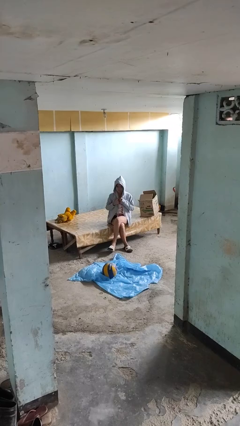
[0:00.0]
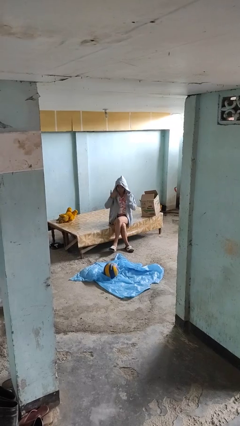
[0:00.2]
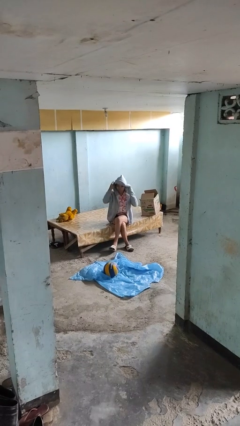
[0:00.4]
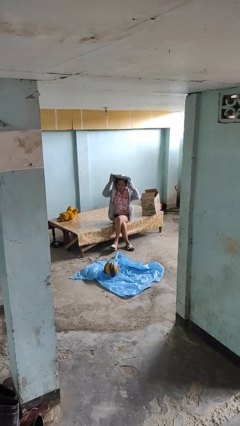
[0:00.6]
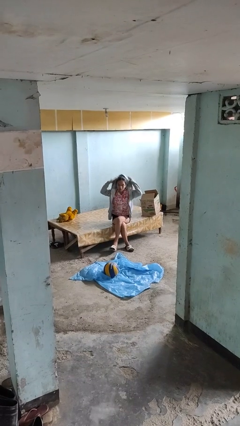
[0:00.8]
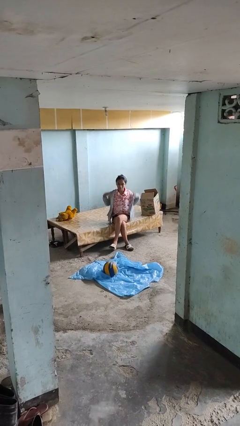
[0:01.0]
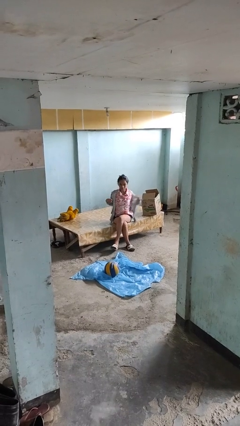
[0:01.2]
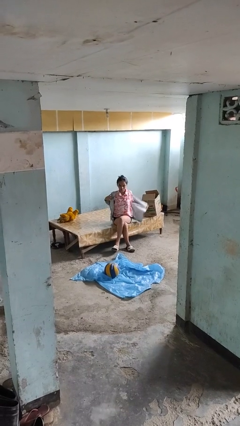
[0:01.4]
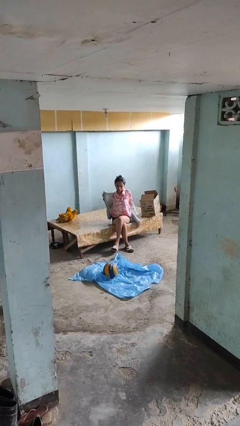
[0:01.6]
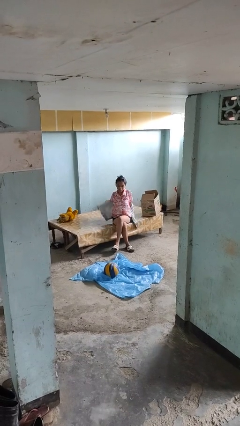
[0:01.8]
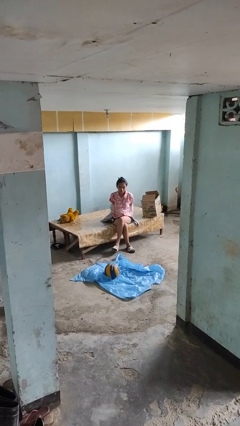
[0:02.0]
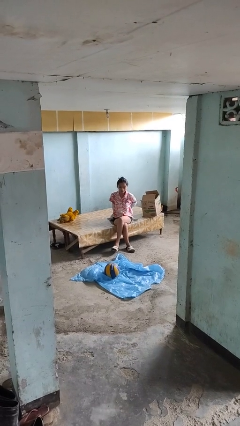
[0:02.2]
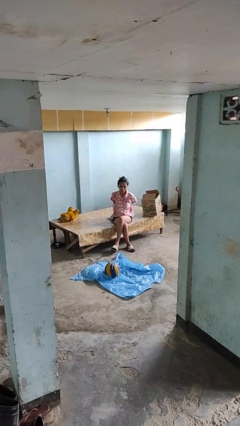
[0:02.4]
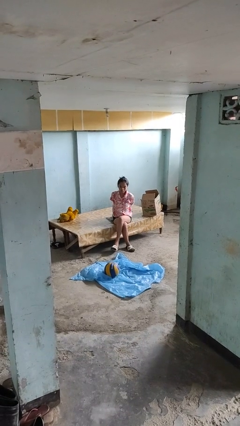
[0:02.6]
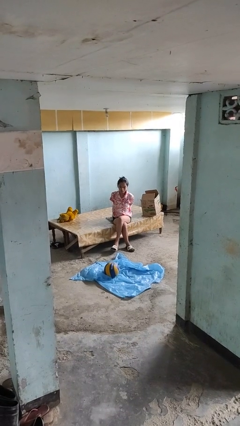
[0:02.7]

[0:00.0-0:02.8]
person takes off hoodie

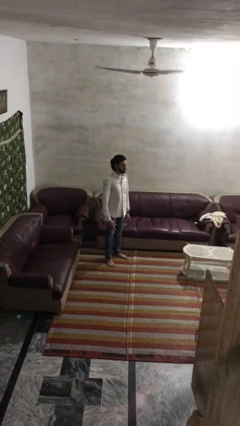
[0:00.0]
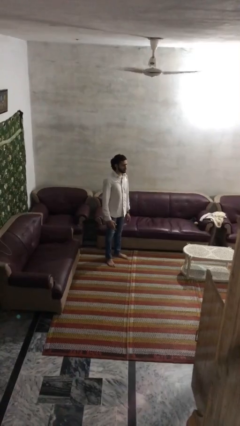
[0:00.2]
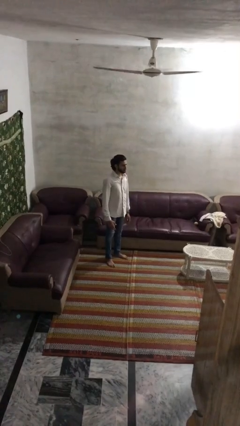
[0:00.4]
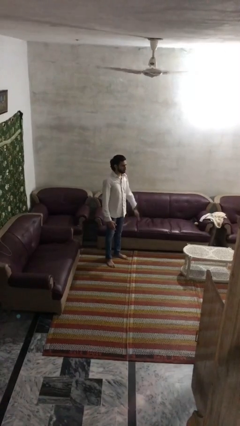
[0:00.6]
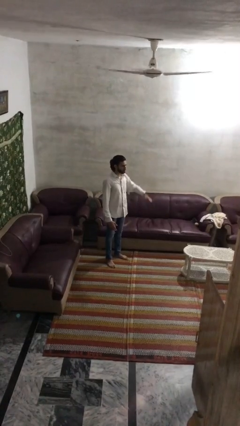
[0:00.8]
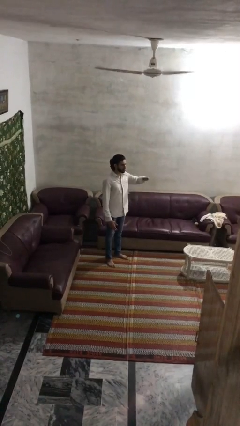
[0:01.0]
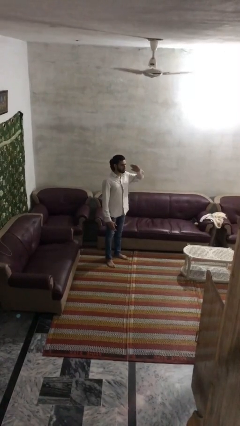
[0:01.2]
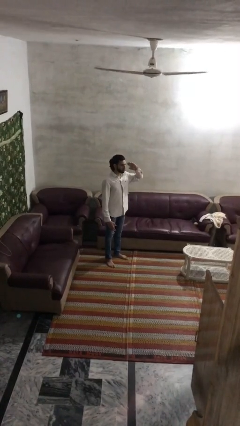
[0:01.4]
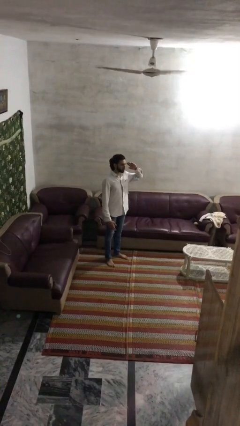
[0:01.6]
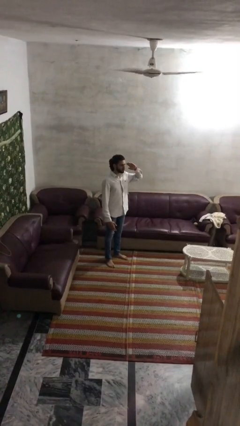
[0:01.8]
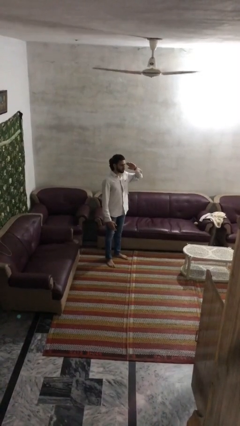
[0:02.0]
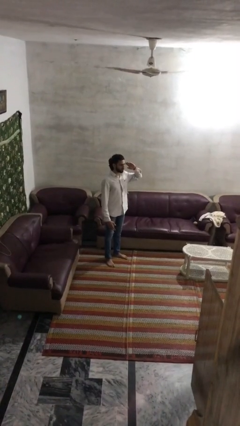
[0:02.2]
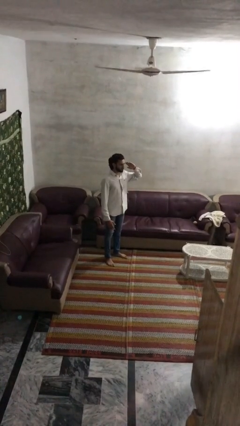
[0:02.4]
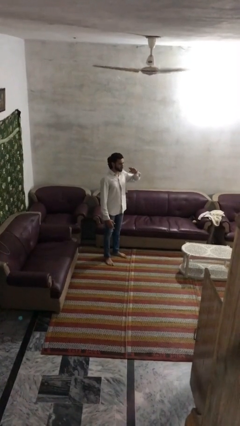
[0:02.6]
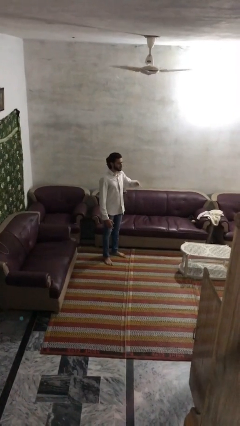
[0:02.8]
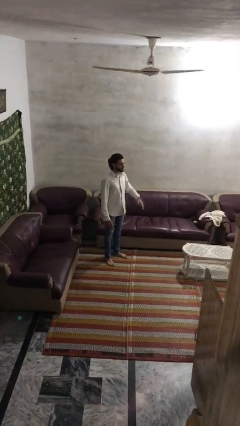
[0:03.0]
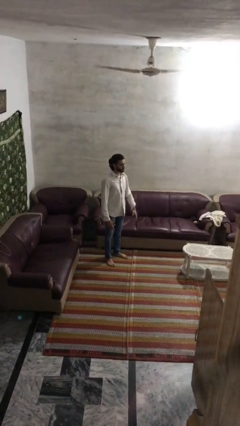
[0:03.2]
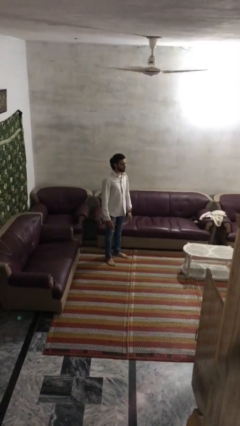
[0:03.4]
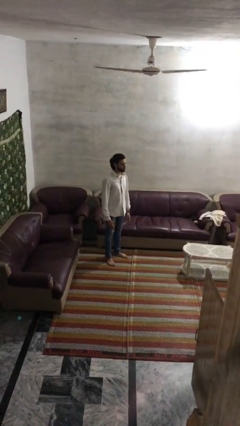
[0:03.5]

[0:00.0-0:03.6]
person salutes

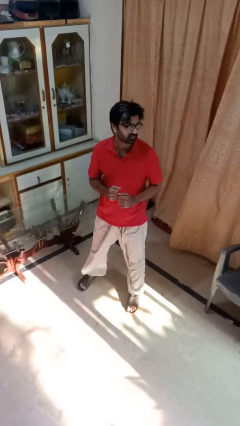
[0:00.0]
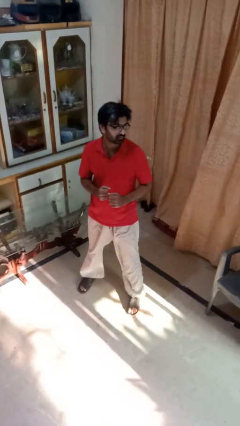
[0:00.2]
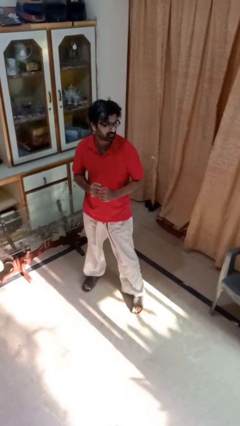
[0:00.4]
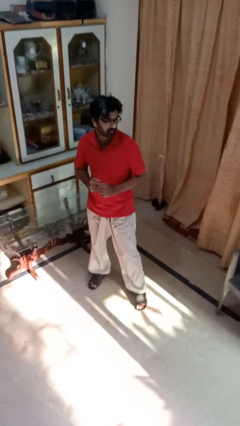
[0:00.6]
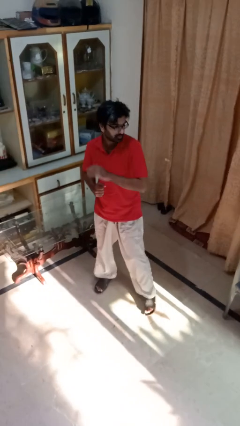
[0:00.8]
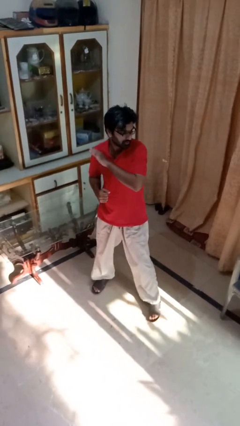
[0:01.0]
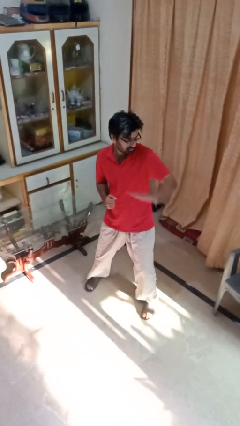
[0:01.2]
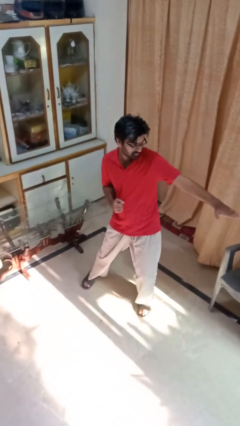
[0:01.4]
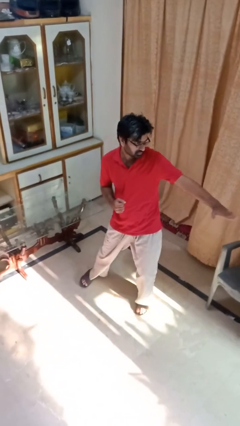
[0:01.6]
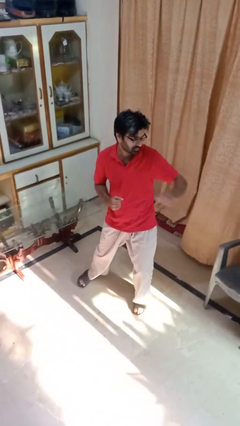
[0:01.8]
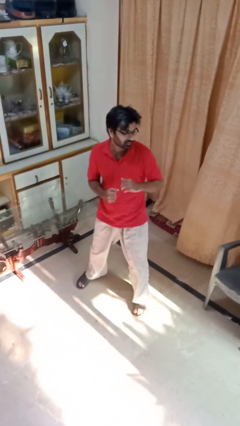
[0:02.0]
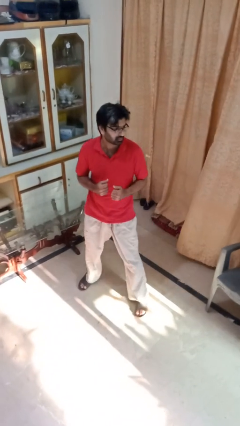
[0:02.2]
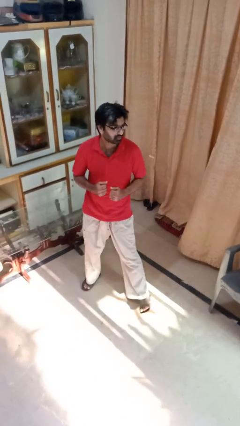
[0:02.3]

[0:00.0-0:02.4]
person karate chop

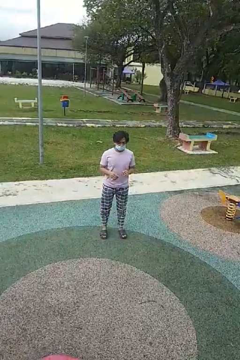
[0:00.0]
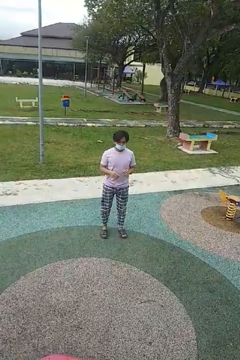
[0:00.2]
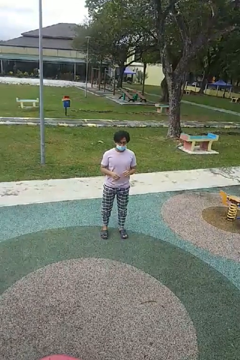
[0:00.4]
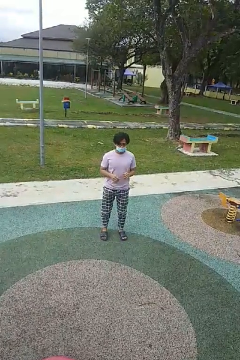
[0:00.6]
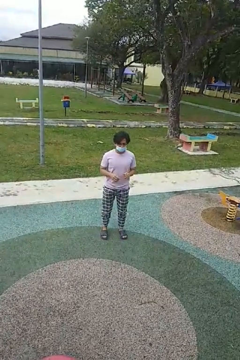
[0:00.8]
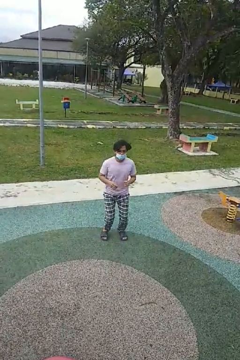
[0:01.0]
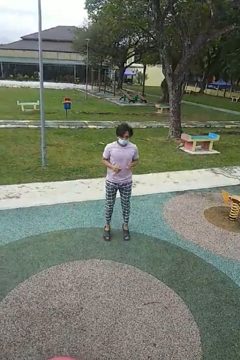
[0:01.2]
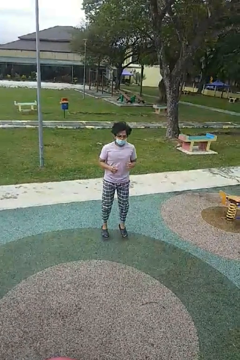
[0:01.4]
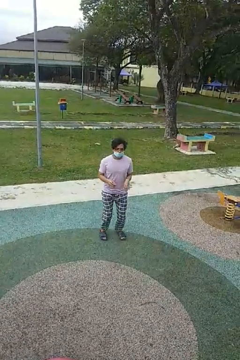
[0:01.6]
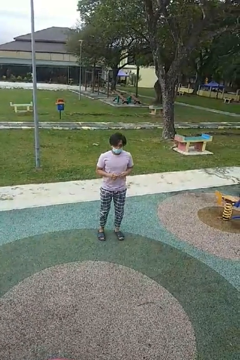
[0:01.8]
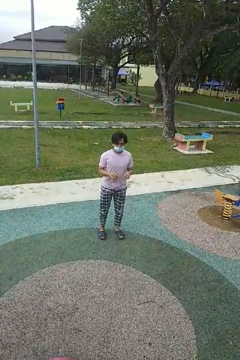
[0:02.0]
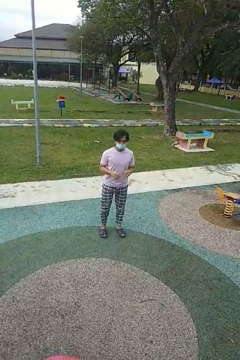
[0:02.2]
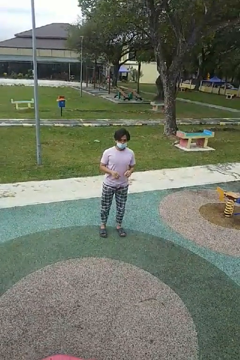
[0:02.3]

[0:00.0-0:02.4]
person jumps

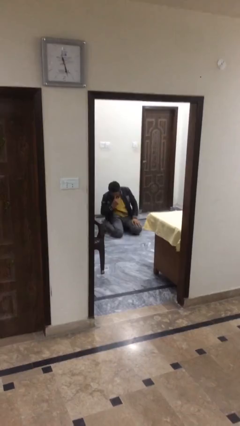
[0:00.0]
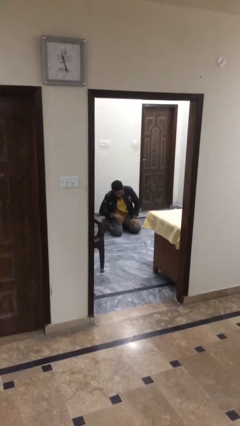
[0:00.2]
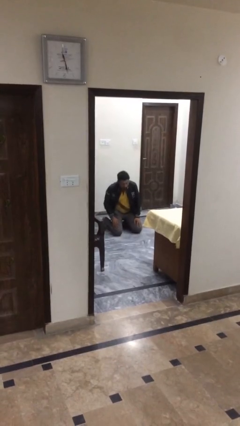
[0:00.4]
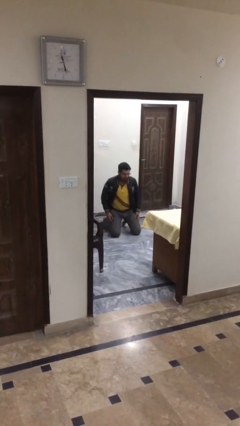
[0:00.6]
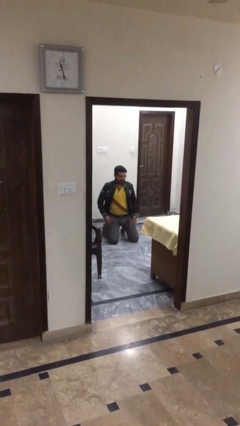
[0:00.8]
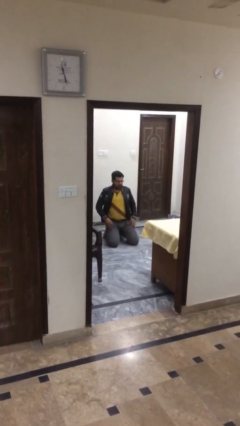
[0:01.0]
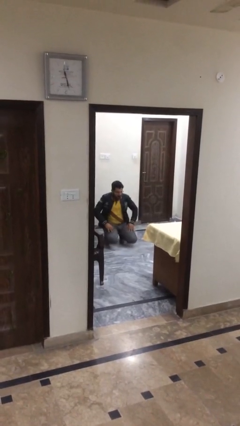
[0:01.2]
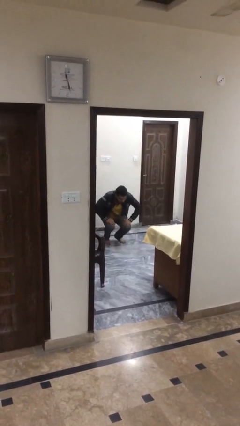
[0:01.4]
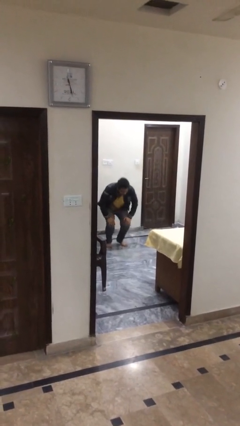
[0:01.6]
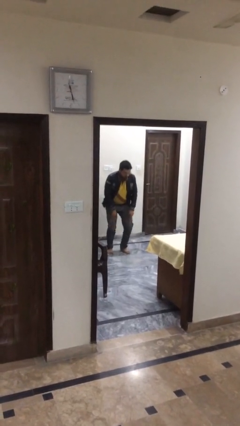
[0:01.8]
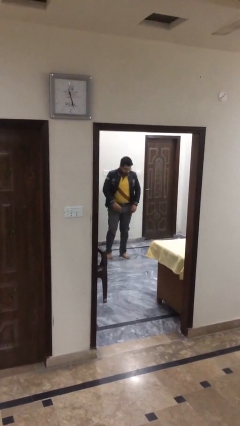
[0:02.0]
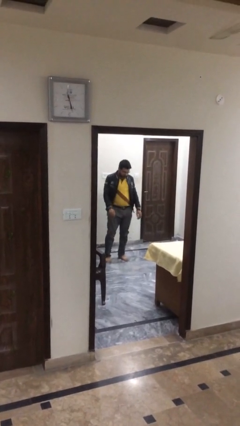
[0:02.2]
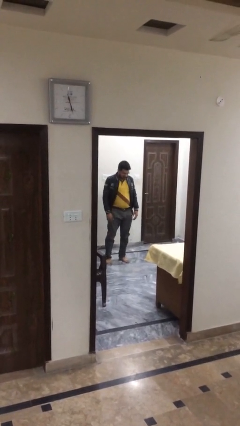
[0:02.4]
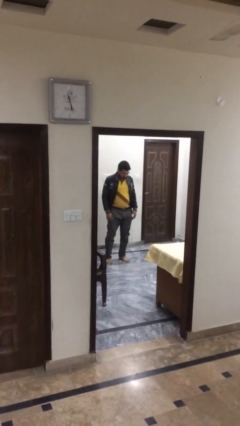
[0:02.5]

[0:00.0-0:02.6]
person stands up

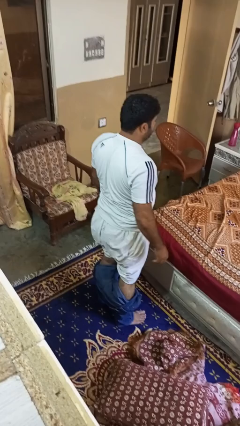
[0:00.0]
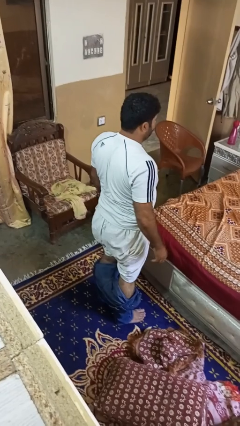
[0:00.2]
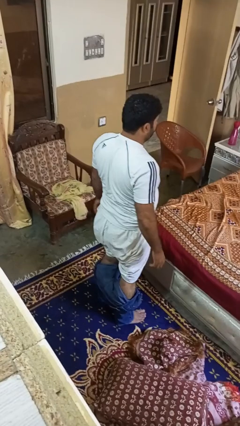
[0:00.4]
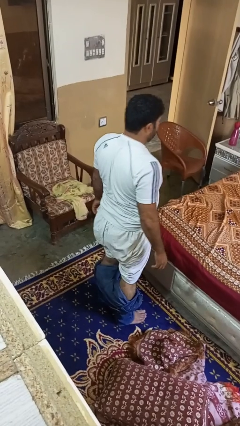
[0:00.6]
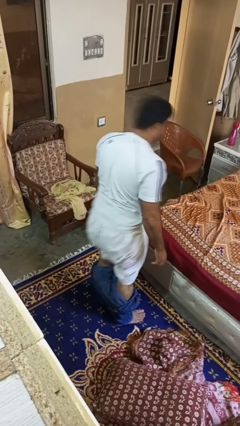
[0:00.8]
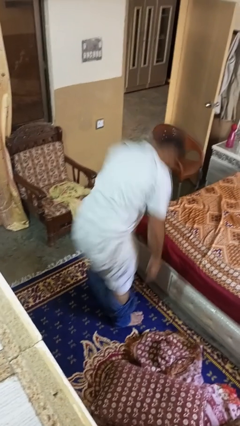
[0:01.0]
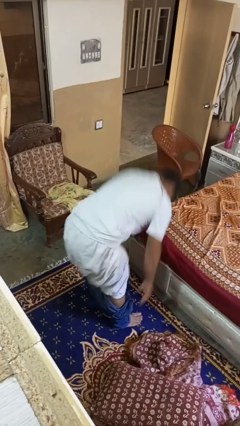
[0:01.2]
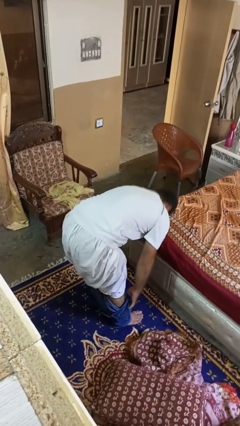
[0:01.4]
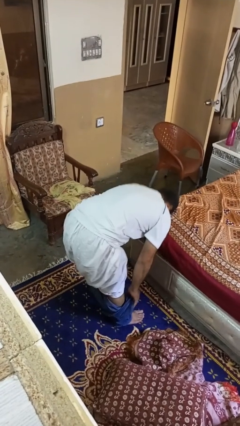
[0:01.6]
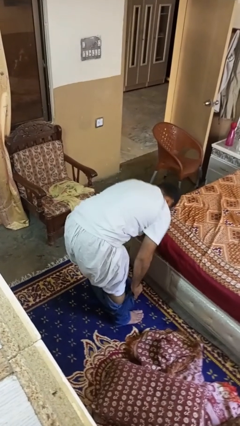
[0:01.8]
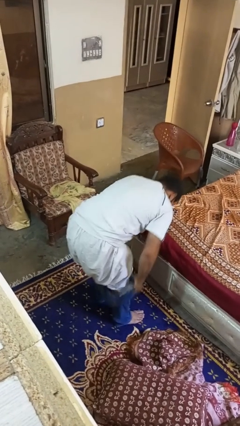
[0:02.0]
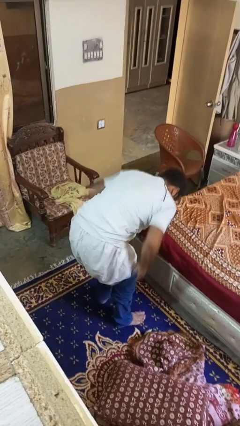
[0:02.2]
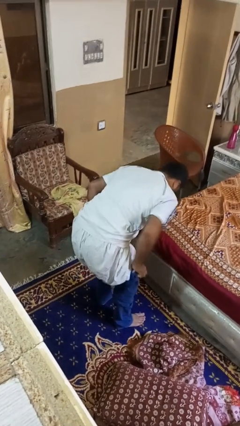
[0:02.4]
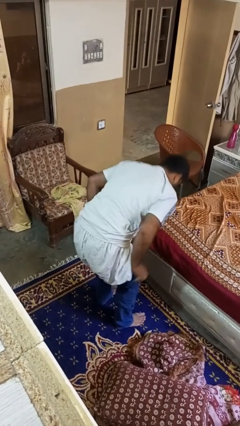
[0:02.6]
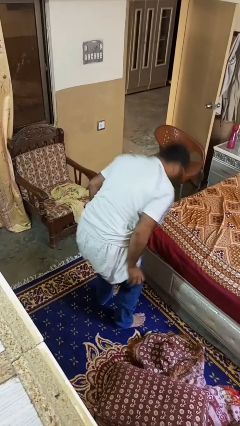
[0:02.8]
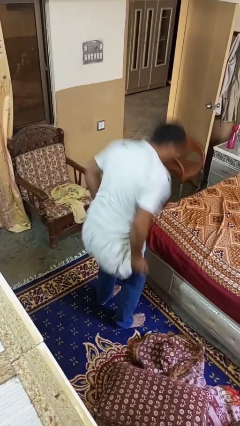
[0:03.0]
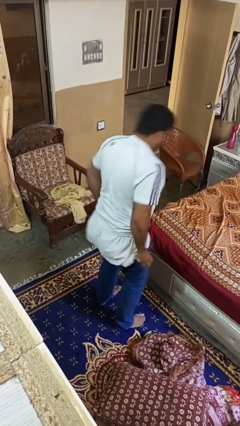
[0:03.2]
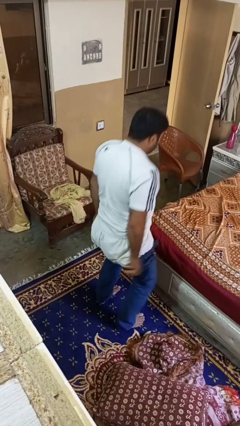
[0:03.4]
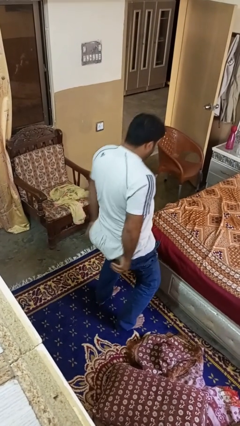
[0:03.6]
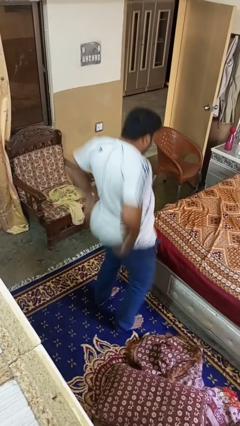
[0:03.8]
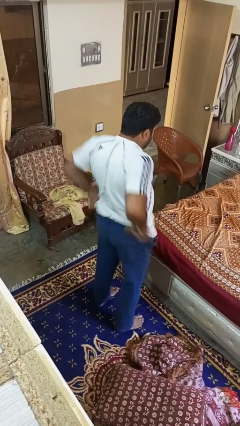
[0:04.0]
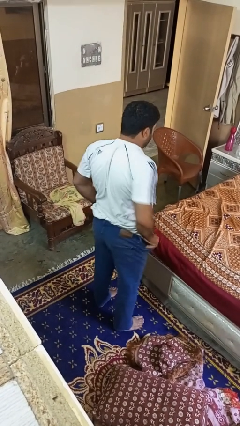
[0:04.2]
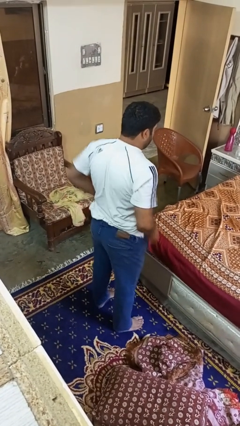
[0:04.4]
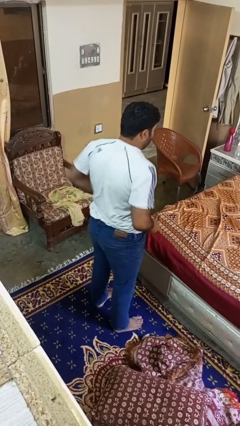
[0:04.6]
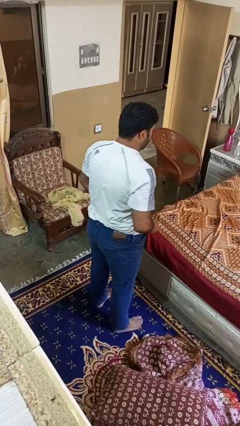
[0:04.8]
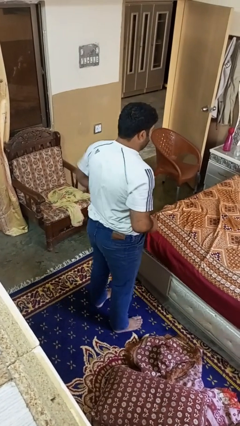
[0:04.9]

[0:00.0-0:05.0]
person puts on pants
